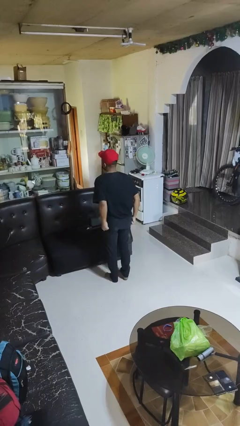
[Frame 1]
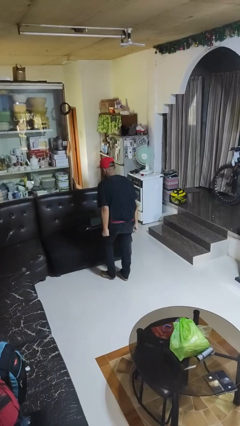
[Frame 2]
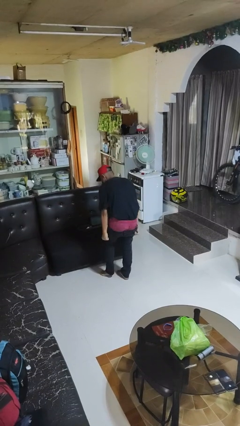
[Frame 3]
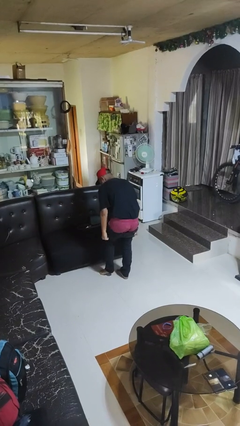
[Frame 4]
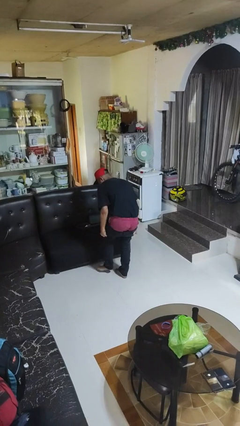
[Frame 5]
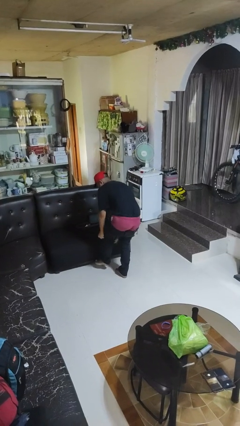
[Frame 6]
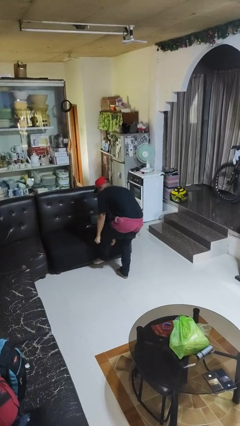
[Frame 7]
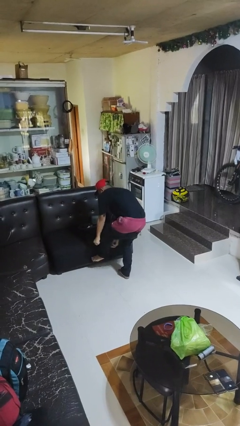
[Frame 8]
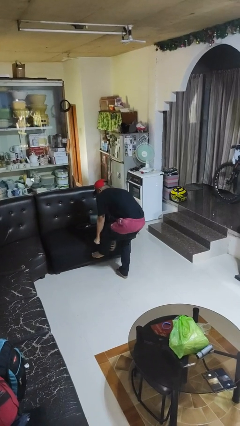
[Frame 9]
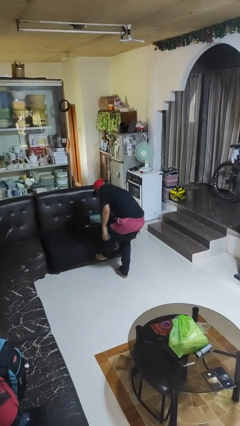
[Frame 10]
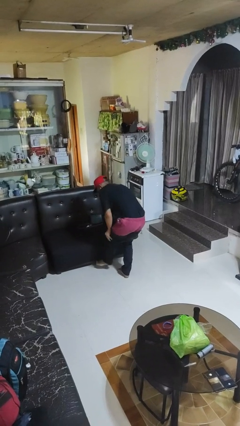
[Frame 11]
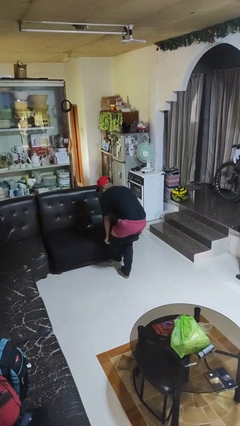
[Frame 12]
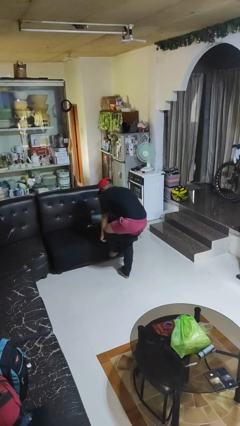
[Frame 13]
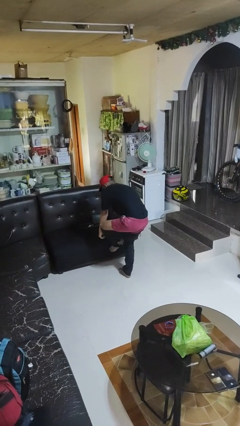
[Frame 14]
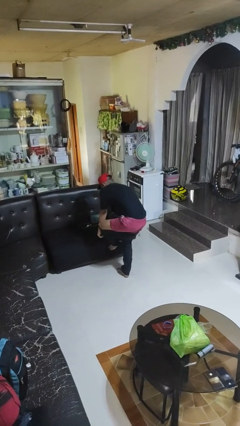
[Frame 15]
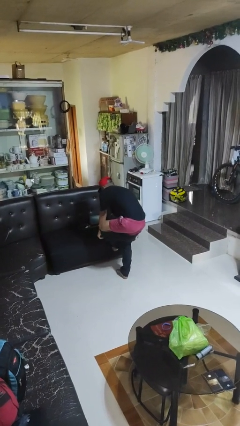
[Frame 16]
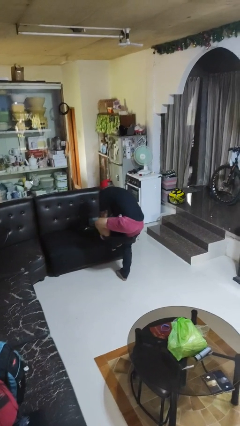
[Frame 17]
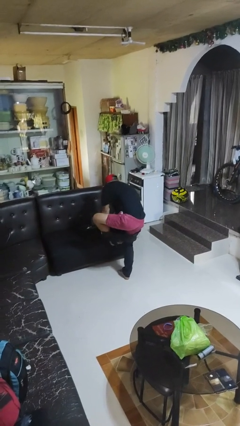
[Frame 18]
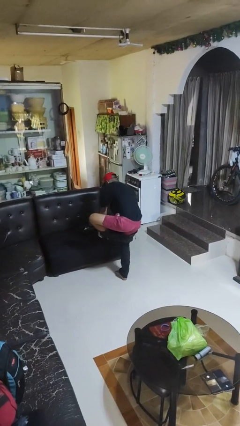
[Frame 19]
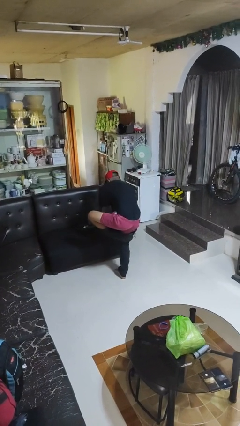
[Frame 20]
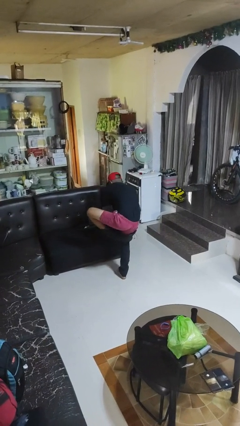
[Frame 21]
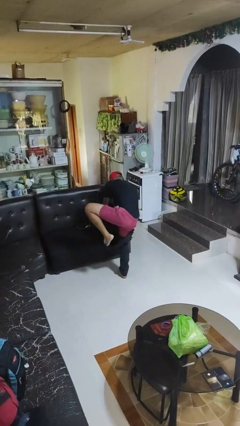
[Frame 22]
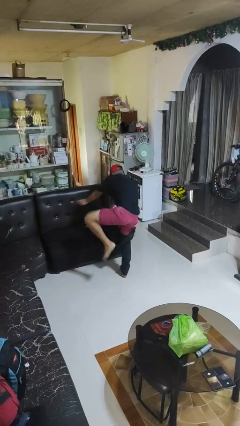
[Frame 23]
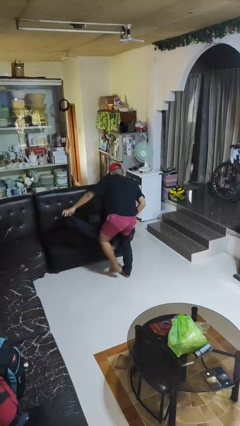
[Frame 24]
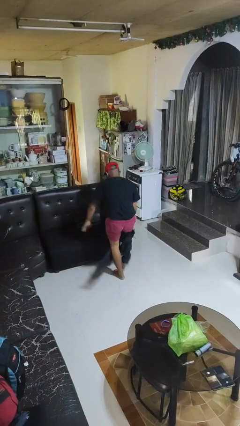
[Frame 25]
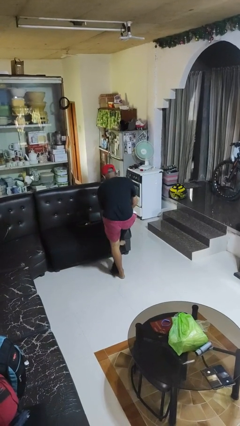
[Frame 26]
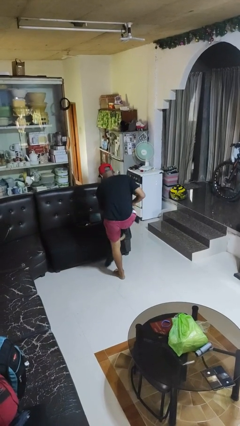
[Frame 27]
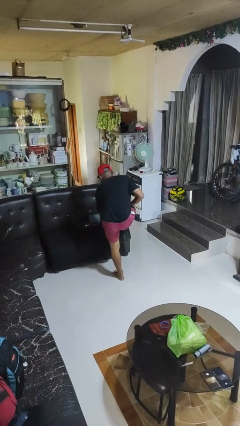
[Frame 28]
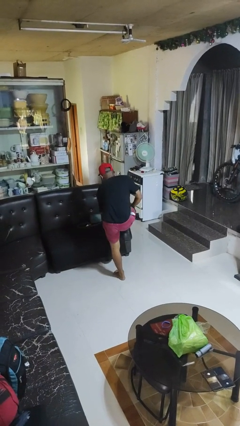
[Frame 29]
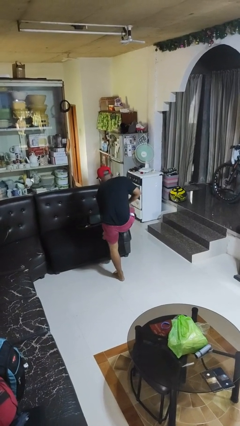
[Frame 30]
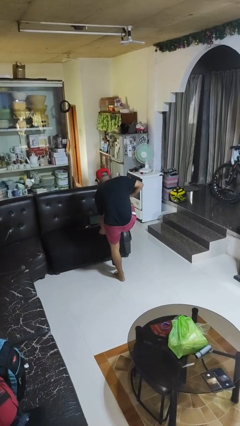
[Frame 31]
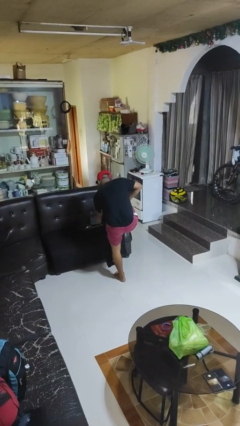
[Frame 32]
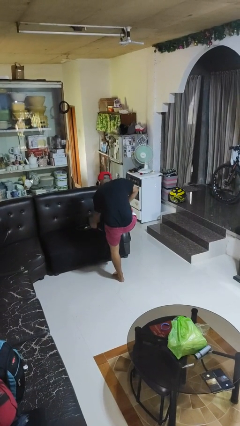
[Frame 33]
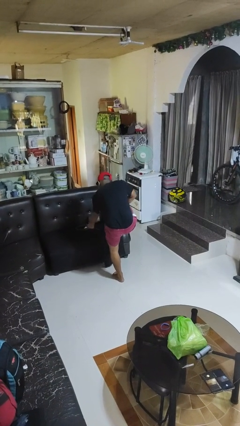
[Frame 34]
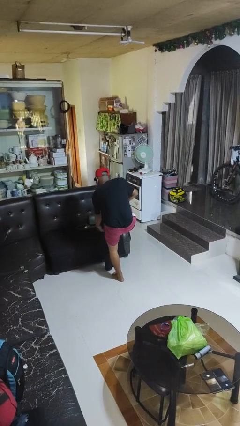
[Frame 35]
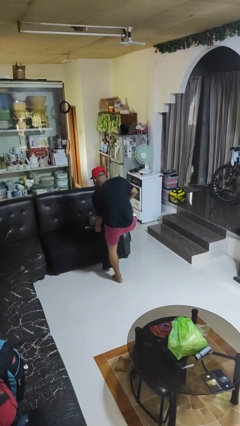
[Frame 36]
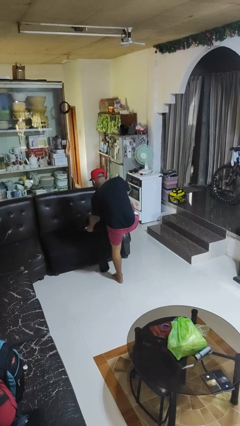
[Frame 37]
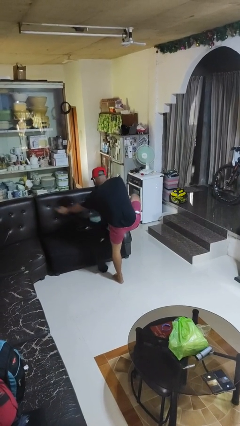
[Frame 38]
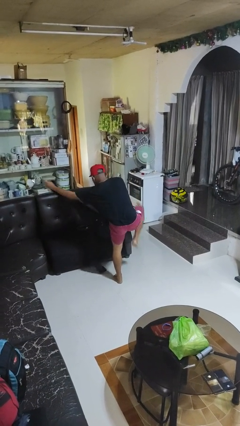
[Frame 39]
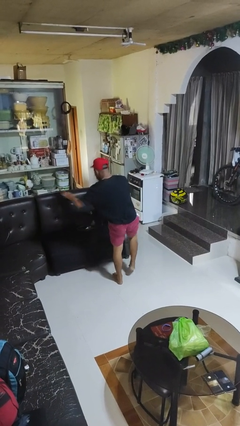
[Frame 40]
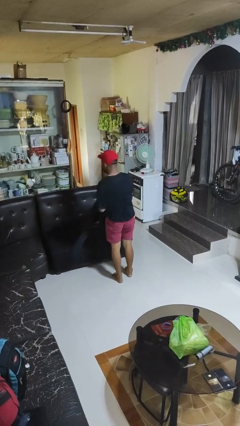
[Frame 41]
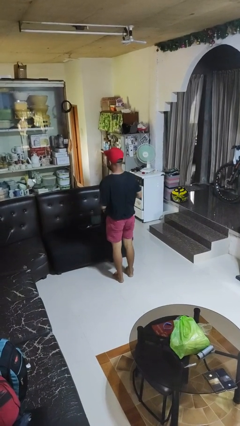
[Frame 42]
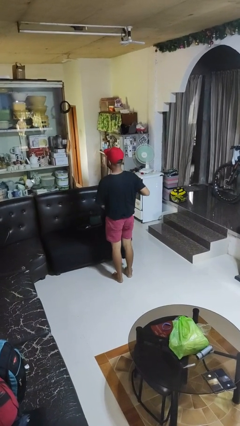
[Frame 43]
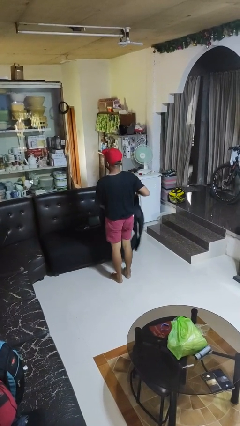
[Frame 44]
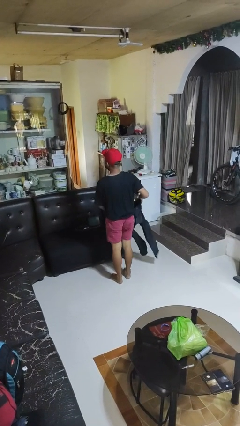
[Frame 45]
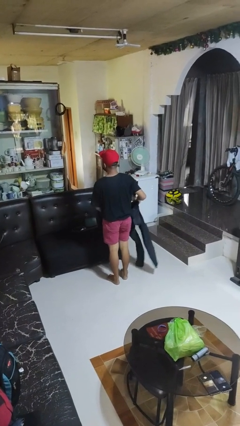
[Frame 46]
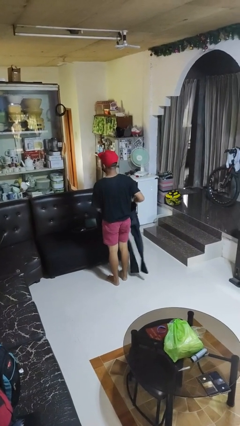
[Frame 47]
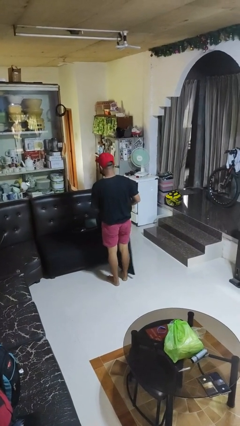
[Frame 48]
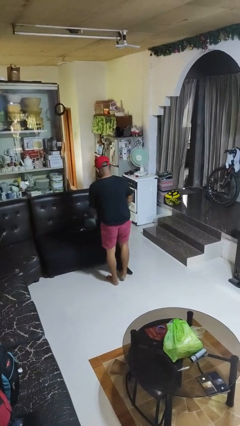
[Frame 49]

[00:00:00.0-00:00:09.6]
person takes off pants

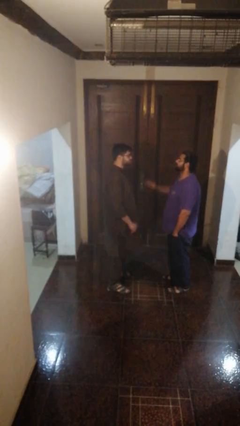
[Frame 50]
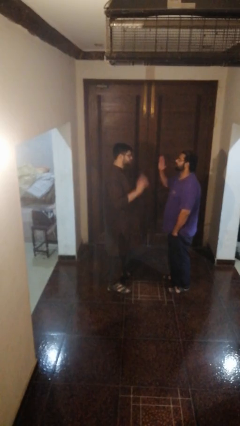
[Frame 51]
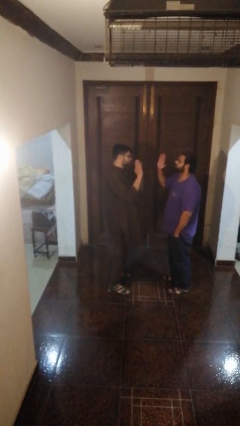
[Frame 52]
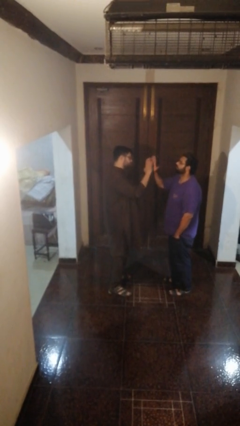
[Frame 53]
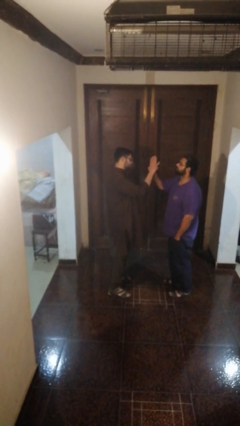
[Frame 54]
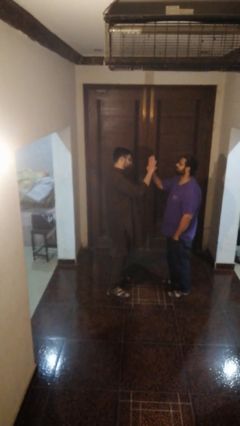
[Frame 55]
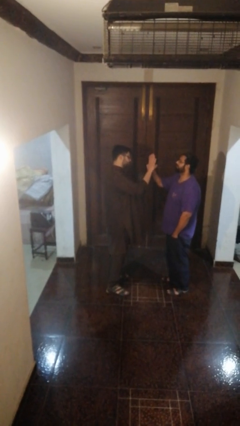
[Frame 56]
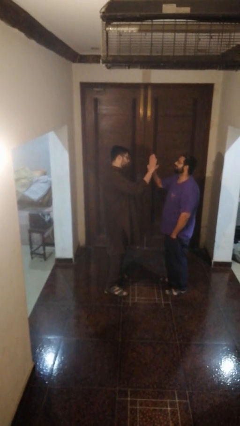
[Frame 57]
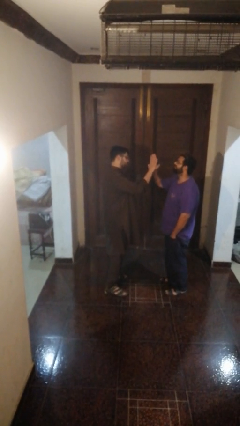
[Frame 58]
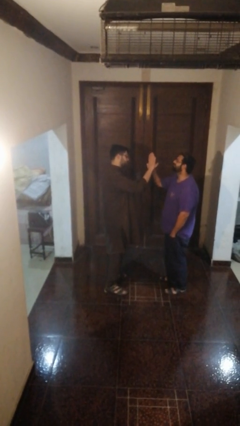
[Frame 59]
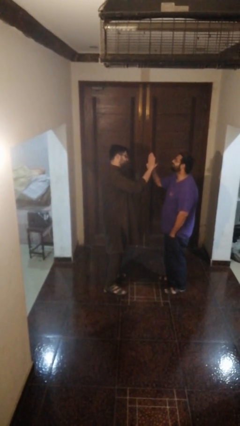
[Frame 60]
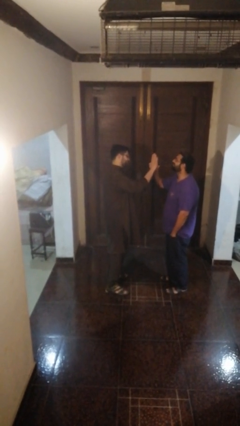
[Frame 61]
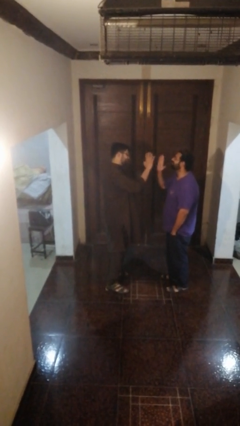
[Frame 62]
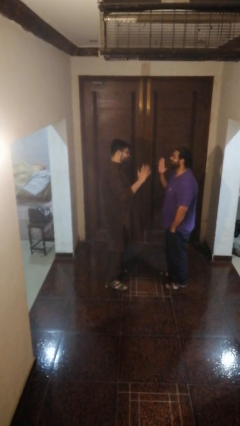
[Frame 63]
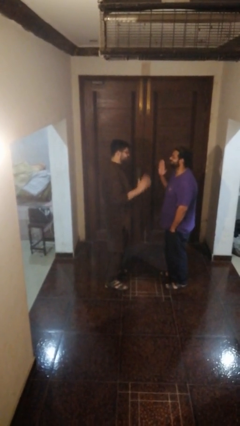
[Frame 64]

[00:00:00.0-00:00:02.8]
person highfives hand

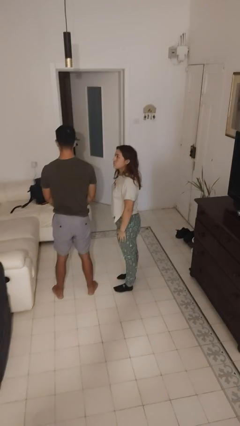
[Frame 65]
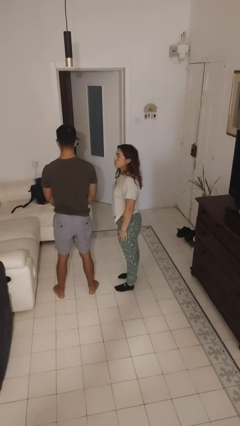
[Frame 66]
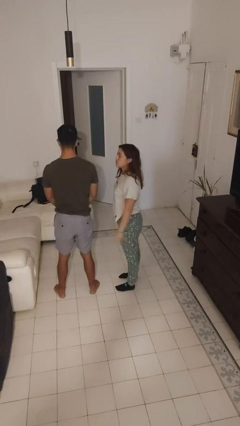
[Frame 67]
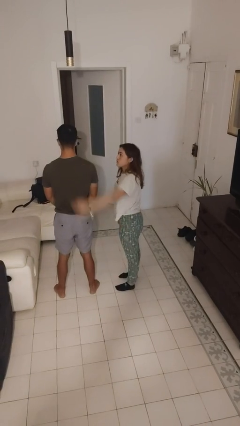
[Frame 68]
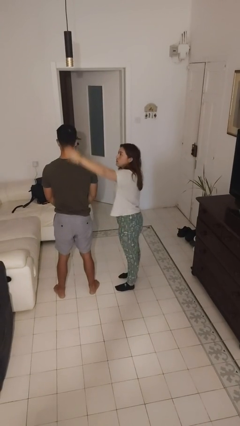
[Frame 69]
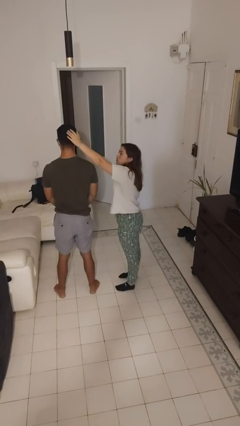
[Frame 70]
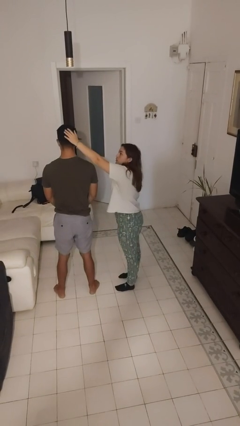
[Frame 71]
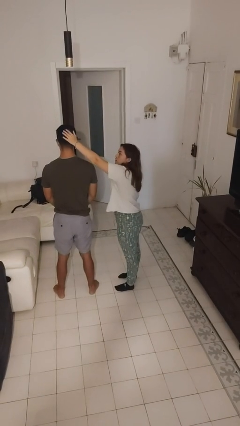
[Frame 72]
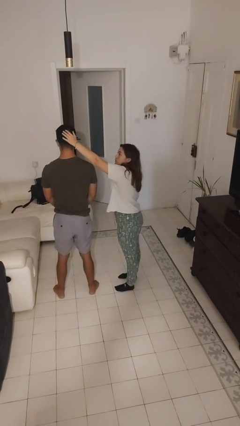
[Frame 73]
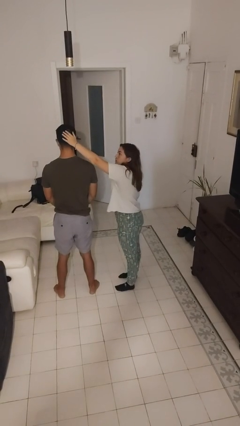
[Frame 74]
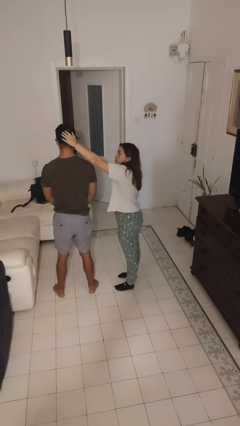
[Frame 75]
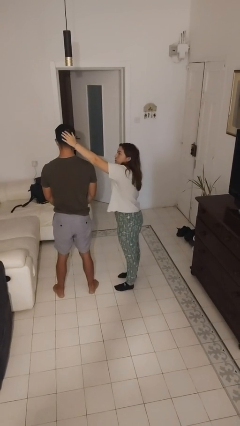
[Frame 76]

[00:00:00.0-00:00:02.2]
person grabs person by hair

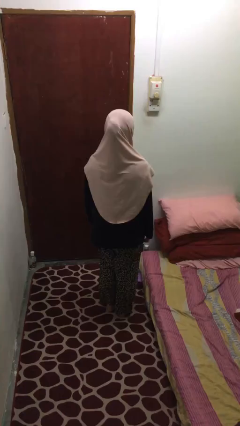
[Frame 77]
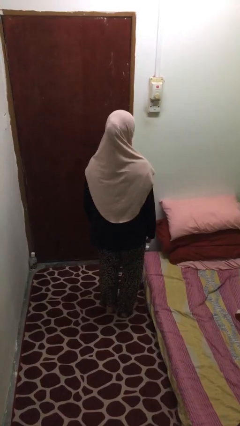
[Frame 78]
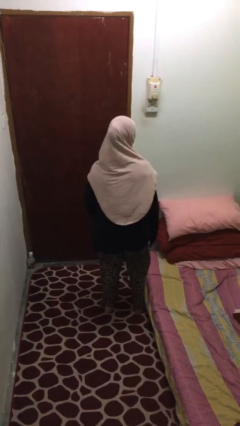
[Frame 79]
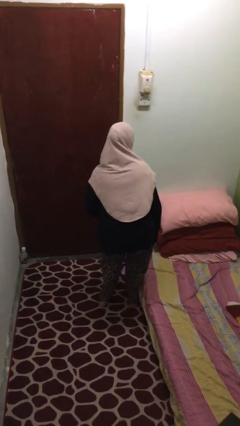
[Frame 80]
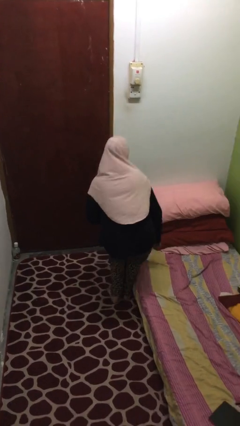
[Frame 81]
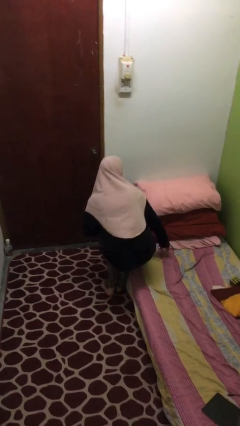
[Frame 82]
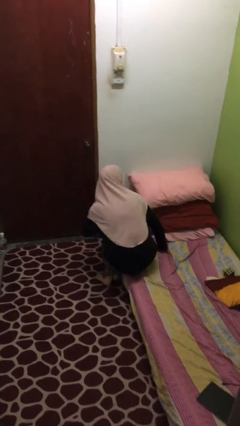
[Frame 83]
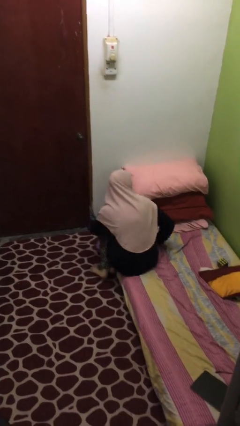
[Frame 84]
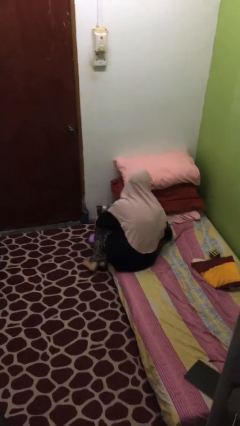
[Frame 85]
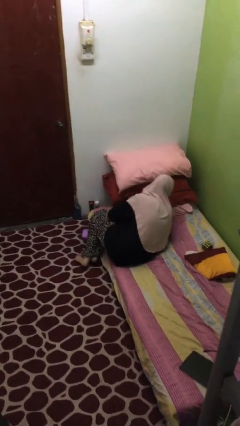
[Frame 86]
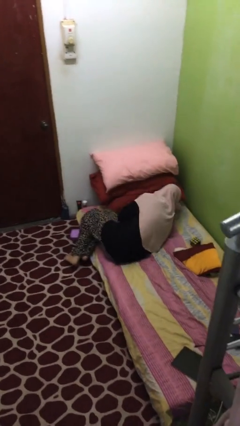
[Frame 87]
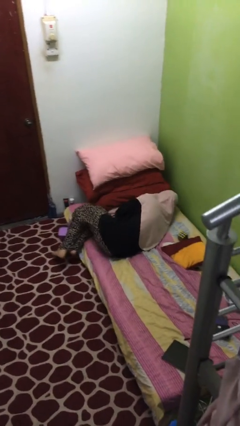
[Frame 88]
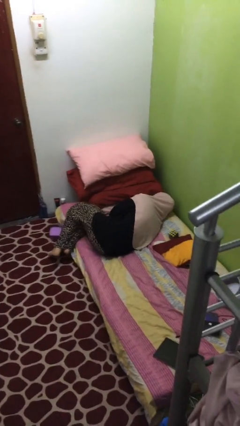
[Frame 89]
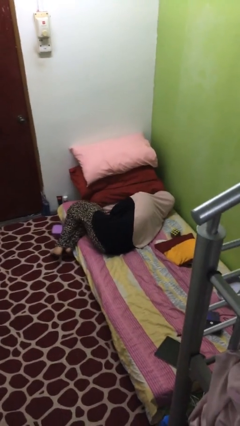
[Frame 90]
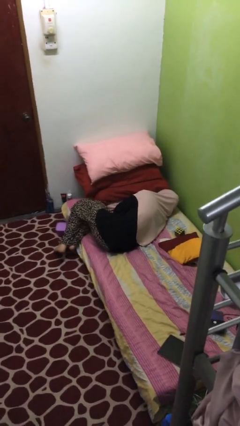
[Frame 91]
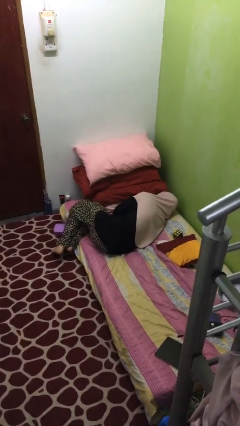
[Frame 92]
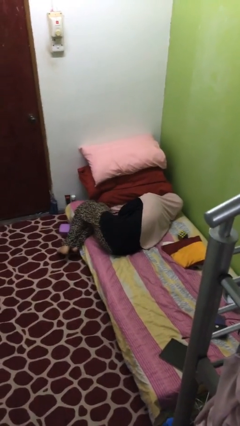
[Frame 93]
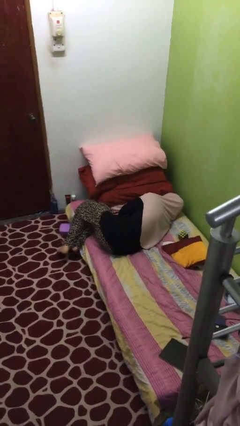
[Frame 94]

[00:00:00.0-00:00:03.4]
person lies down on bed
